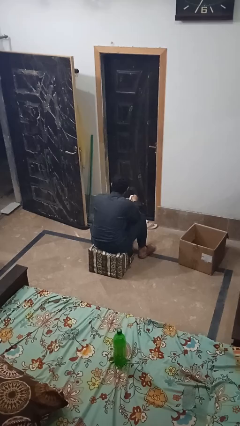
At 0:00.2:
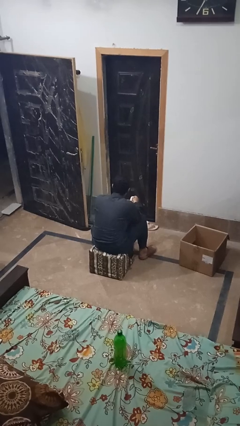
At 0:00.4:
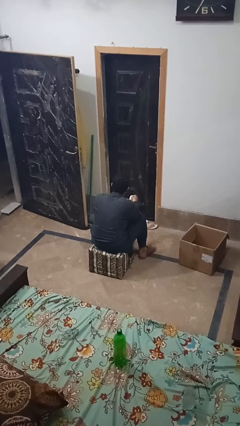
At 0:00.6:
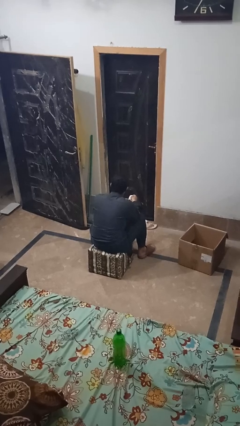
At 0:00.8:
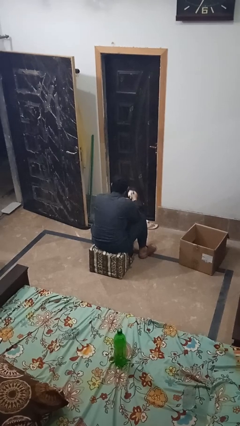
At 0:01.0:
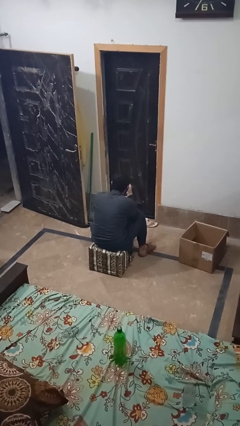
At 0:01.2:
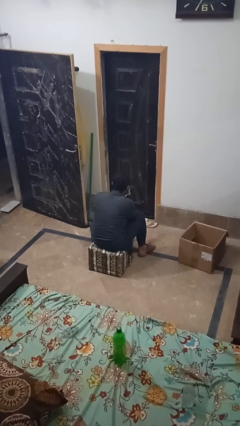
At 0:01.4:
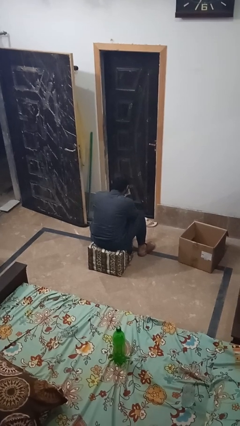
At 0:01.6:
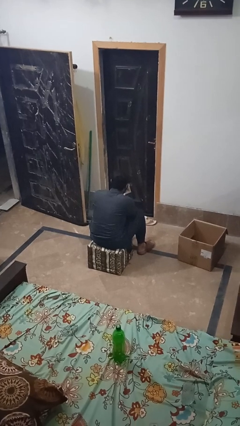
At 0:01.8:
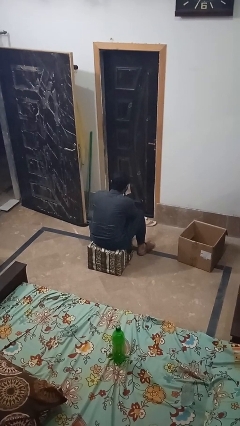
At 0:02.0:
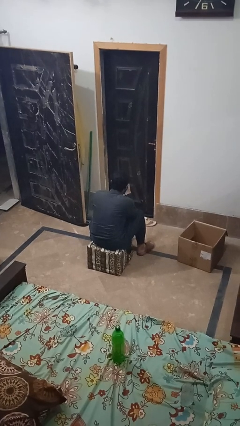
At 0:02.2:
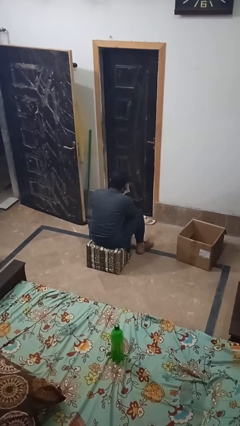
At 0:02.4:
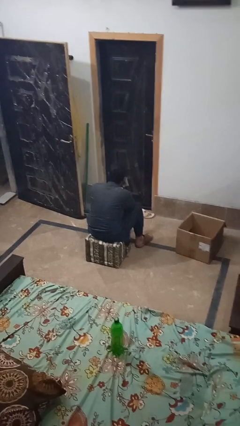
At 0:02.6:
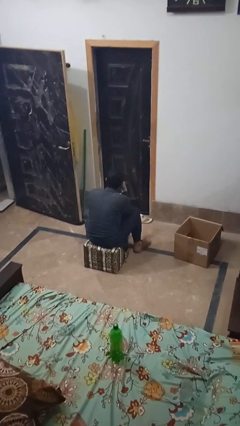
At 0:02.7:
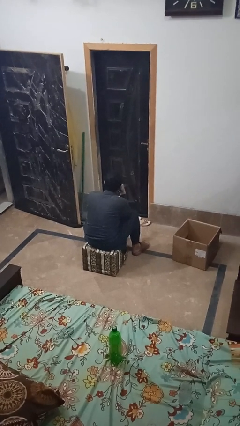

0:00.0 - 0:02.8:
person blows nose

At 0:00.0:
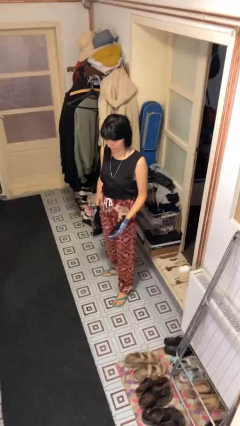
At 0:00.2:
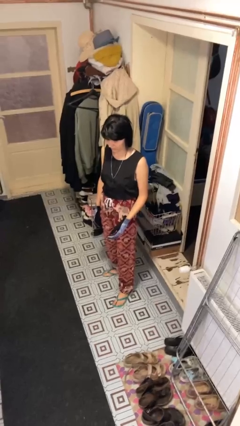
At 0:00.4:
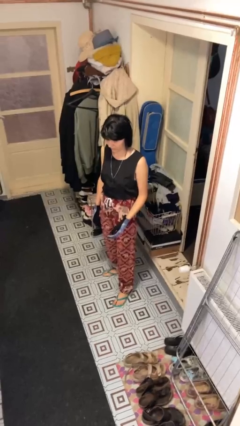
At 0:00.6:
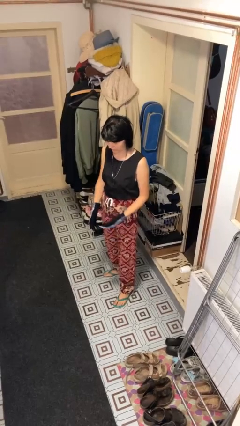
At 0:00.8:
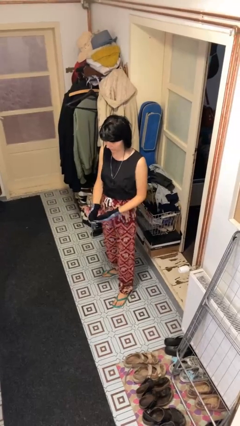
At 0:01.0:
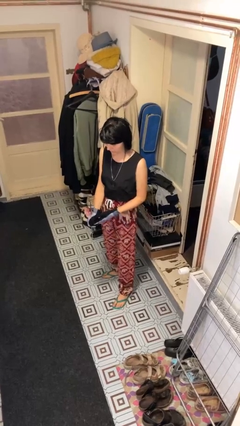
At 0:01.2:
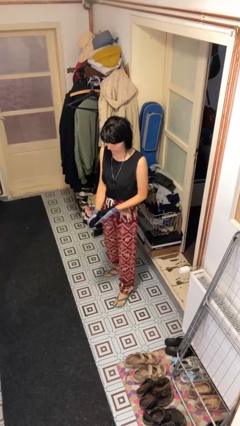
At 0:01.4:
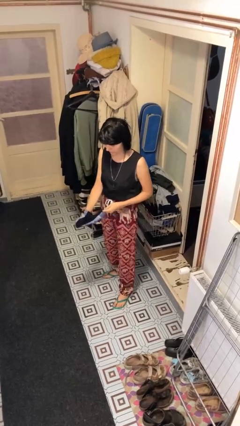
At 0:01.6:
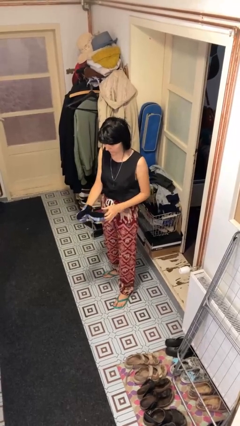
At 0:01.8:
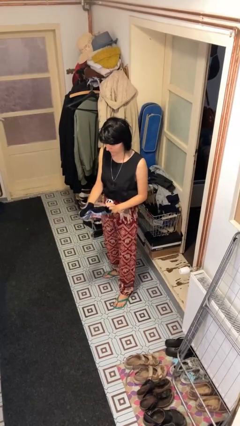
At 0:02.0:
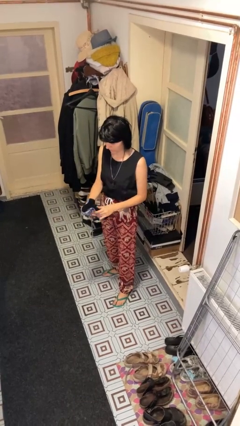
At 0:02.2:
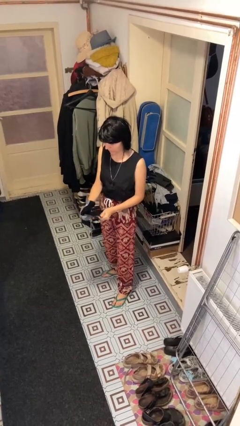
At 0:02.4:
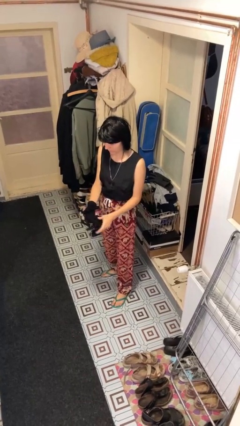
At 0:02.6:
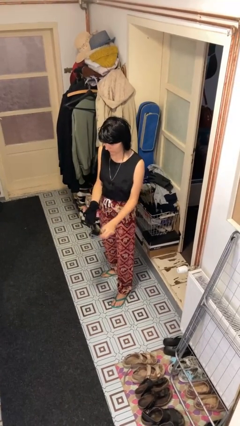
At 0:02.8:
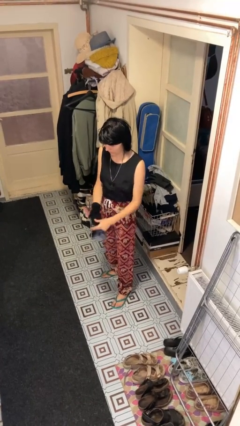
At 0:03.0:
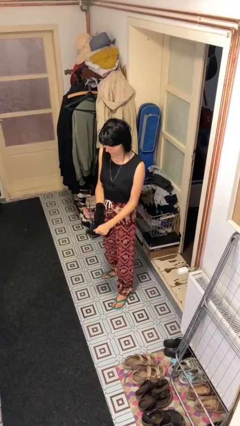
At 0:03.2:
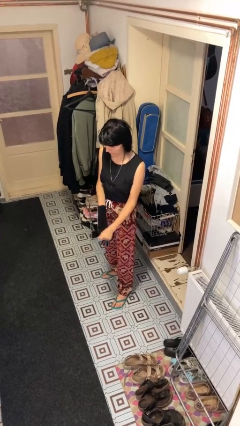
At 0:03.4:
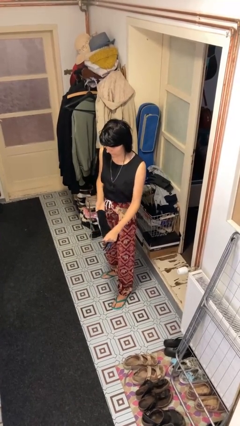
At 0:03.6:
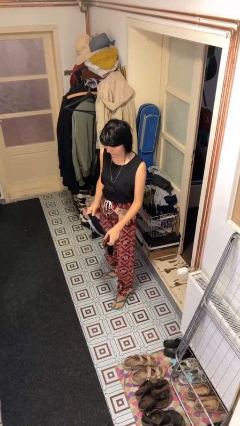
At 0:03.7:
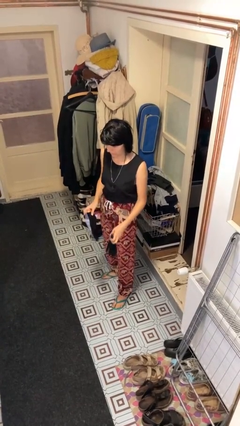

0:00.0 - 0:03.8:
person takes off gloves

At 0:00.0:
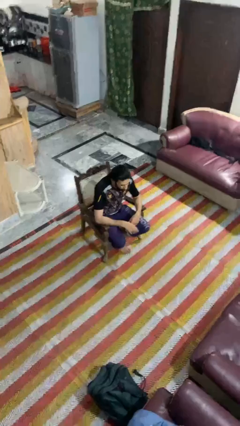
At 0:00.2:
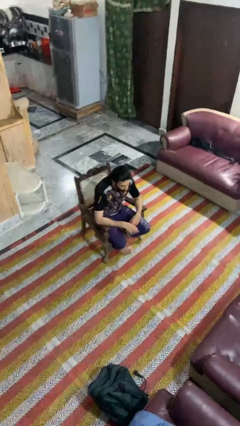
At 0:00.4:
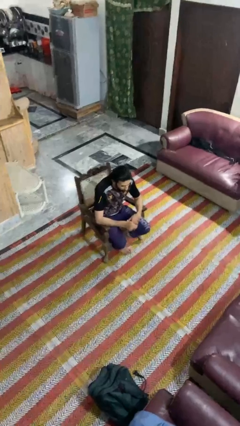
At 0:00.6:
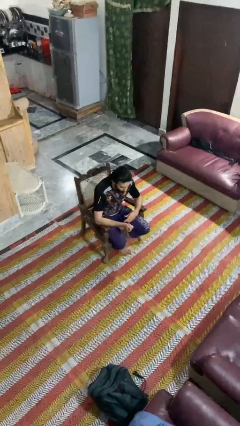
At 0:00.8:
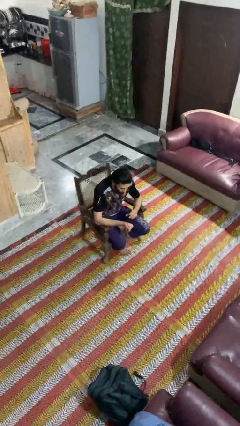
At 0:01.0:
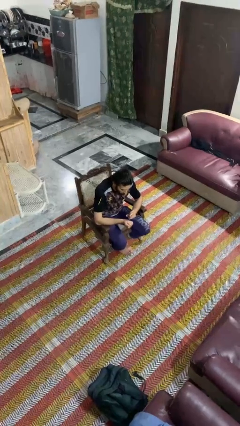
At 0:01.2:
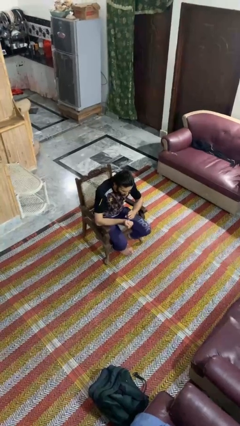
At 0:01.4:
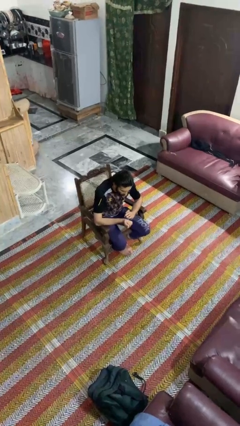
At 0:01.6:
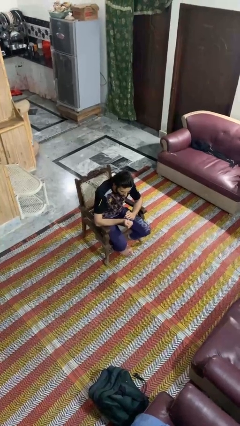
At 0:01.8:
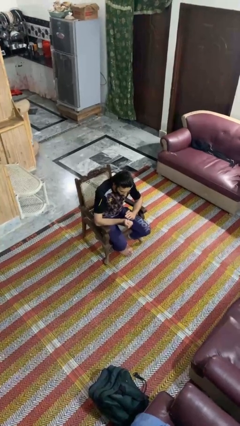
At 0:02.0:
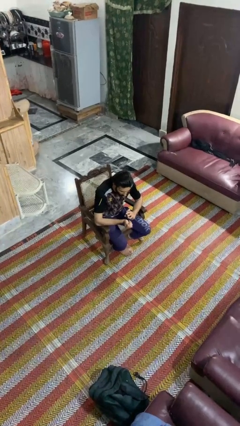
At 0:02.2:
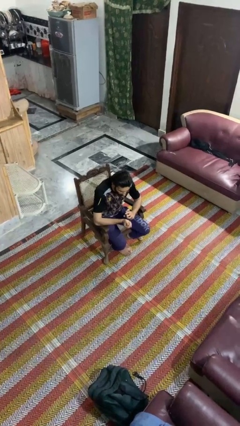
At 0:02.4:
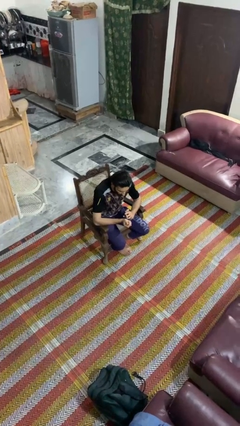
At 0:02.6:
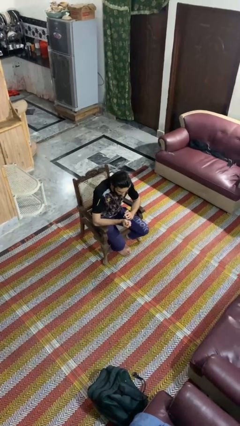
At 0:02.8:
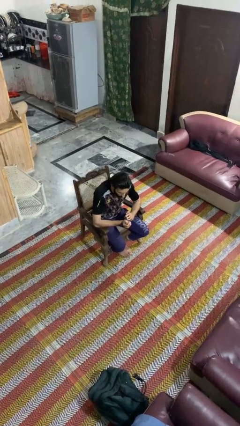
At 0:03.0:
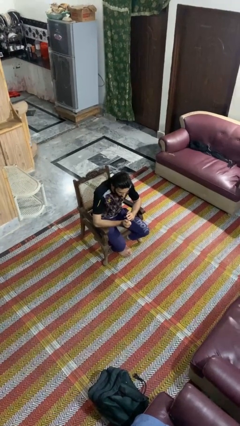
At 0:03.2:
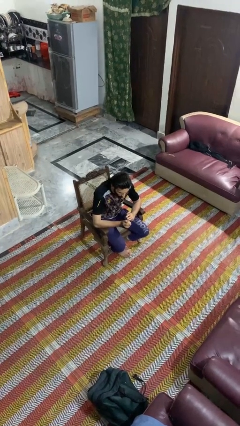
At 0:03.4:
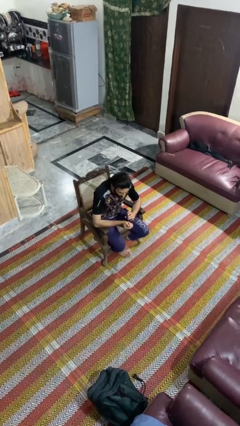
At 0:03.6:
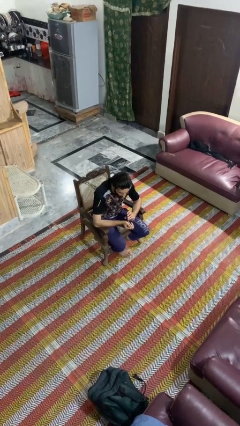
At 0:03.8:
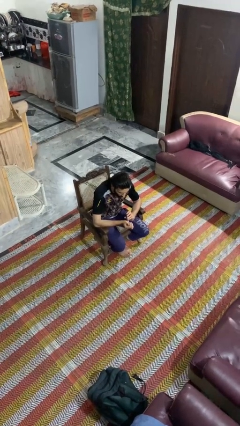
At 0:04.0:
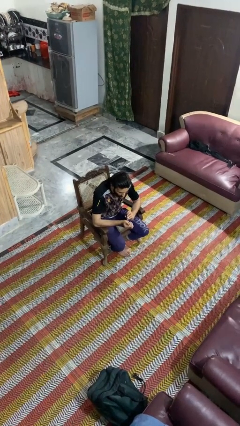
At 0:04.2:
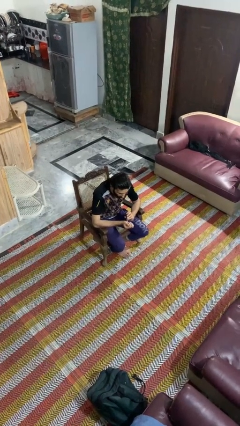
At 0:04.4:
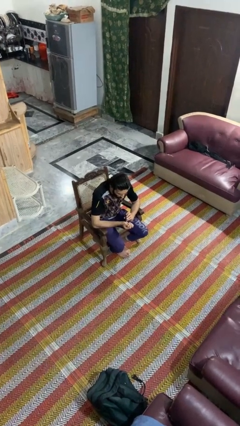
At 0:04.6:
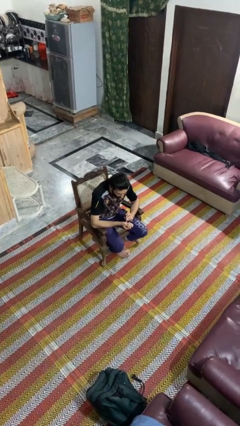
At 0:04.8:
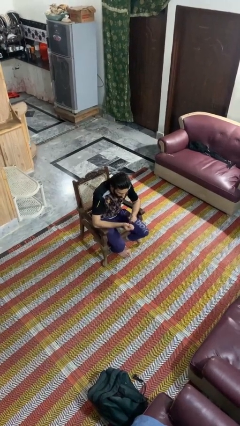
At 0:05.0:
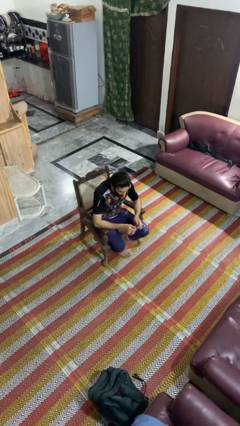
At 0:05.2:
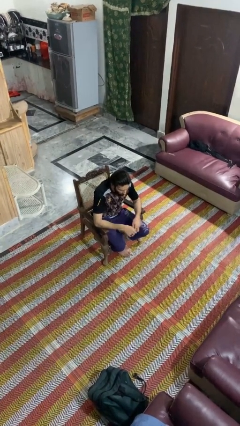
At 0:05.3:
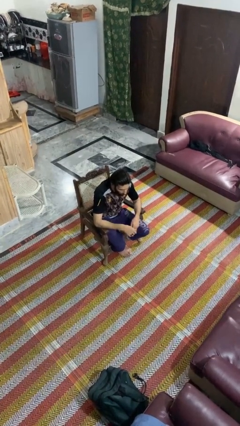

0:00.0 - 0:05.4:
person clips fingernails

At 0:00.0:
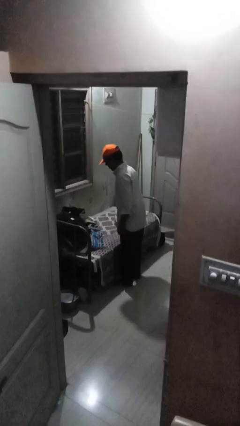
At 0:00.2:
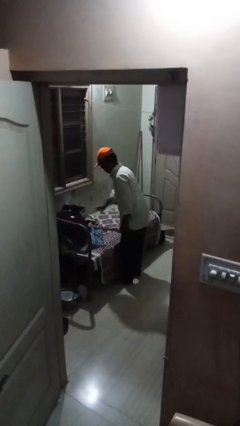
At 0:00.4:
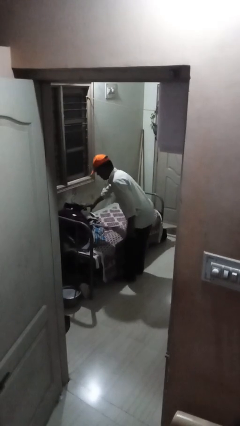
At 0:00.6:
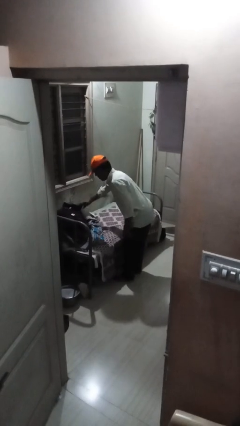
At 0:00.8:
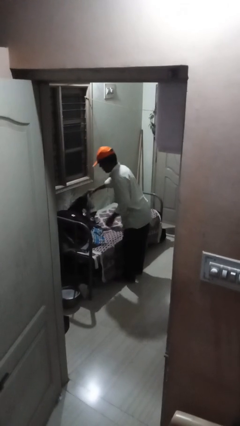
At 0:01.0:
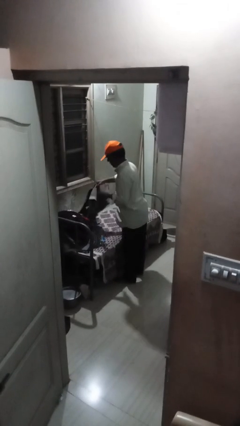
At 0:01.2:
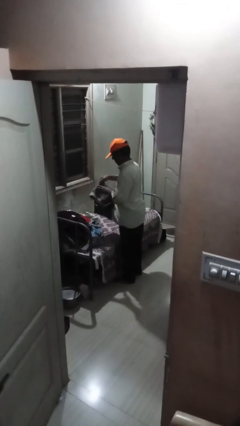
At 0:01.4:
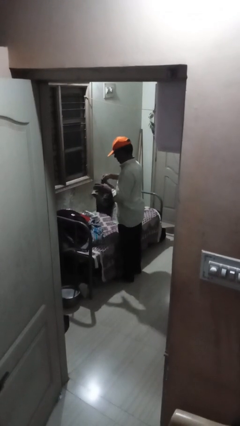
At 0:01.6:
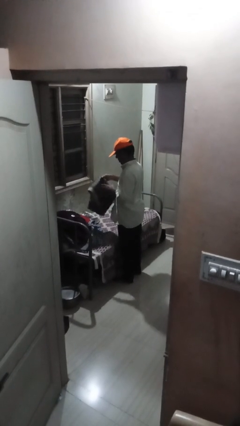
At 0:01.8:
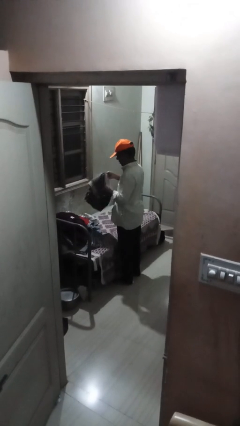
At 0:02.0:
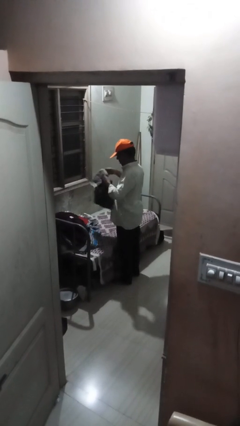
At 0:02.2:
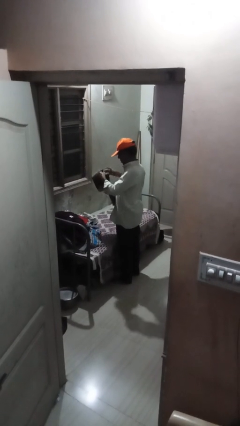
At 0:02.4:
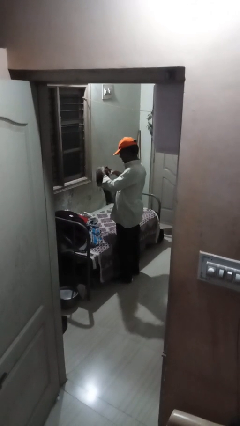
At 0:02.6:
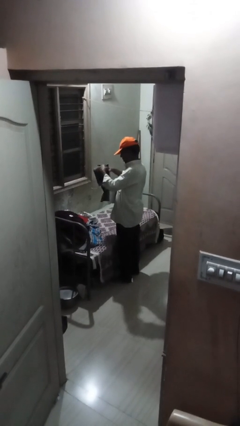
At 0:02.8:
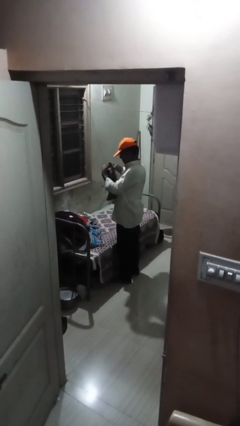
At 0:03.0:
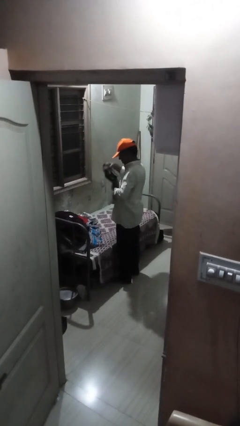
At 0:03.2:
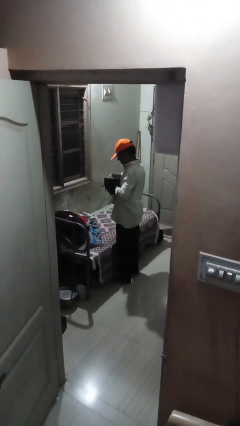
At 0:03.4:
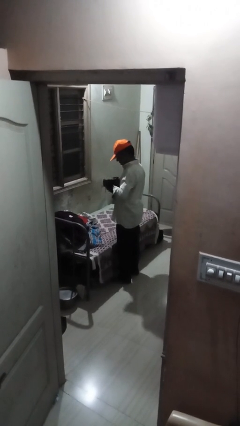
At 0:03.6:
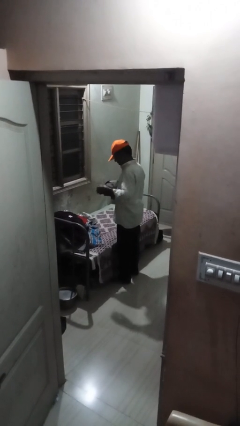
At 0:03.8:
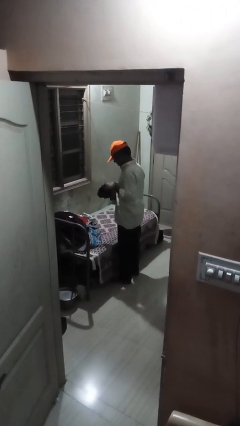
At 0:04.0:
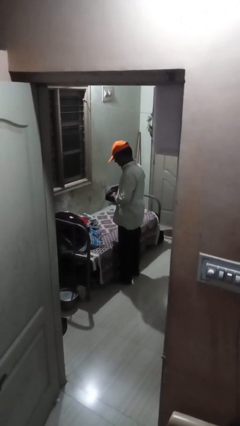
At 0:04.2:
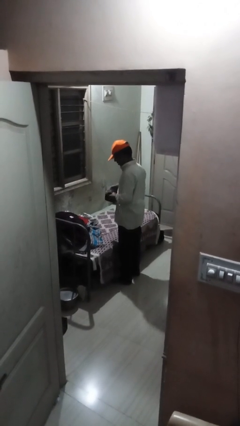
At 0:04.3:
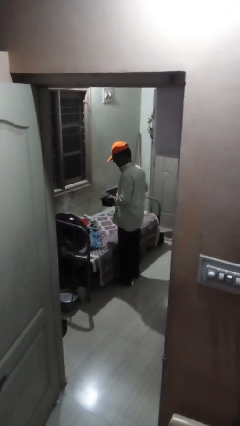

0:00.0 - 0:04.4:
person folds pants

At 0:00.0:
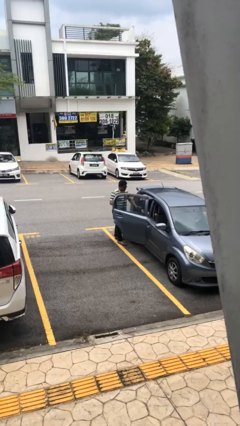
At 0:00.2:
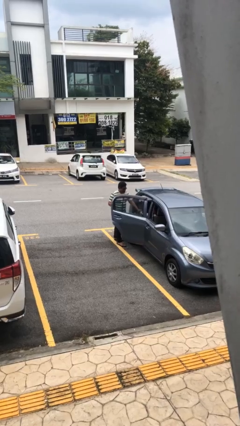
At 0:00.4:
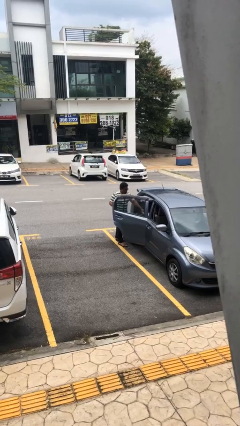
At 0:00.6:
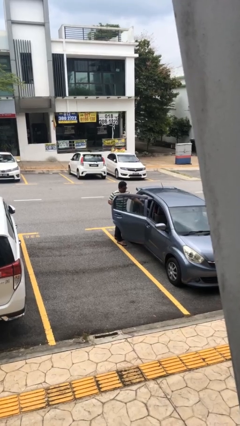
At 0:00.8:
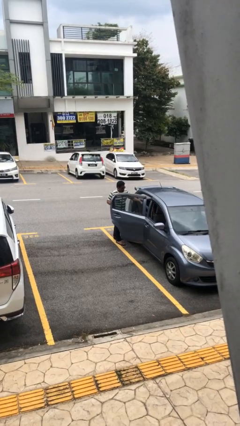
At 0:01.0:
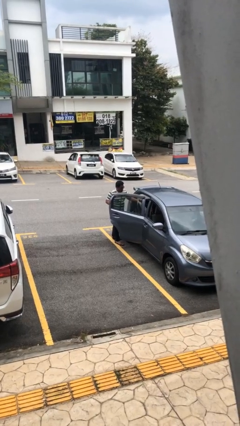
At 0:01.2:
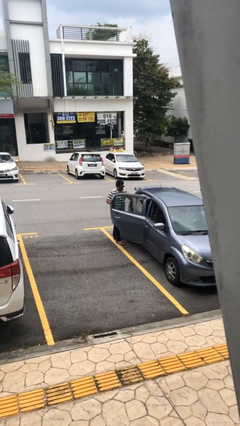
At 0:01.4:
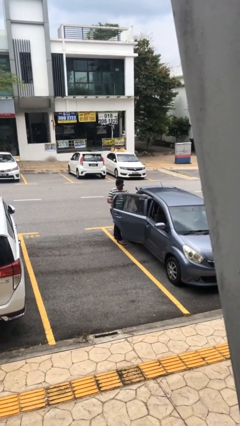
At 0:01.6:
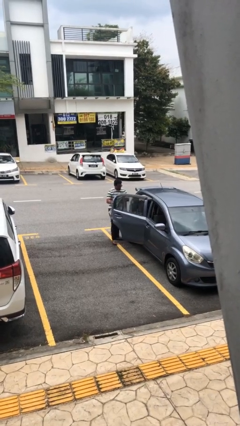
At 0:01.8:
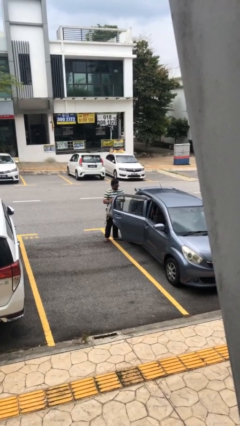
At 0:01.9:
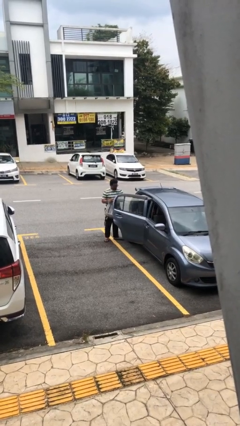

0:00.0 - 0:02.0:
person unloads car
